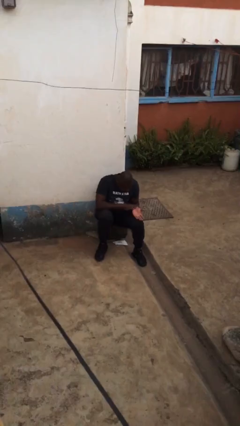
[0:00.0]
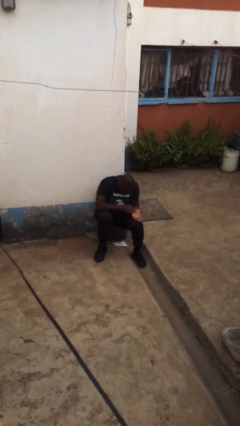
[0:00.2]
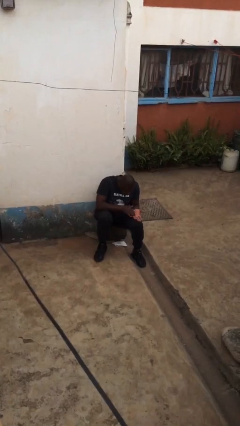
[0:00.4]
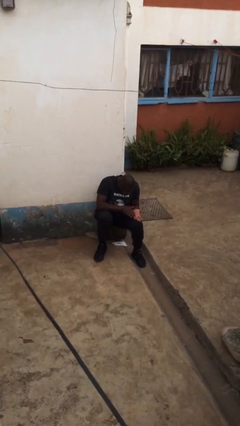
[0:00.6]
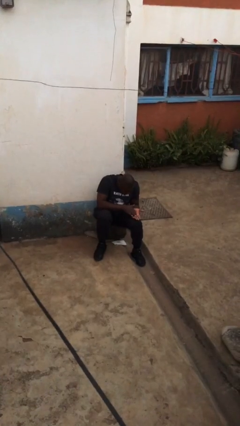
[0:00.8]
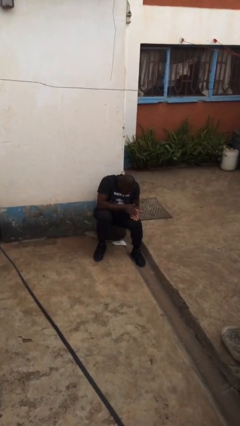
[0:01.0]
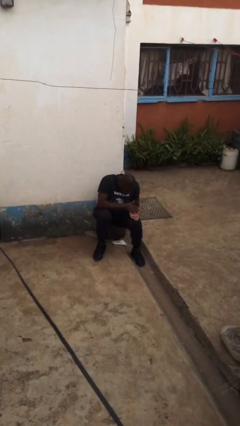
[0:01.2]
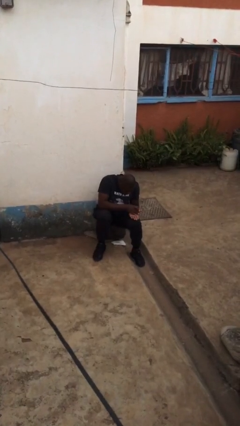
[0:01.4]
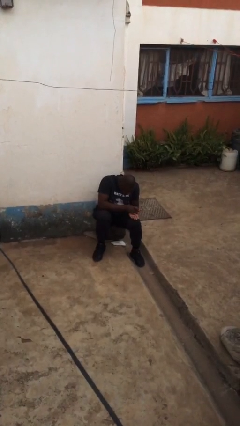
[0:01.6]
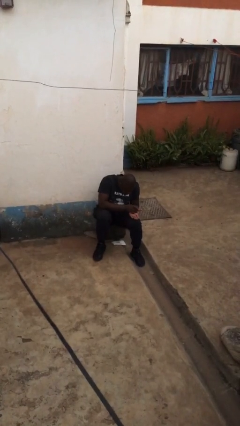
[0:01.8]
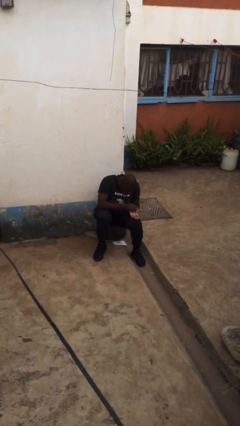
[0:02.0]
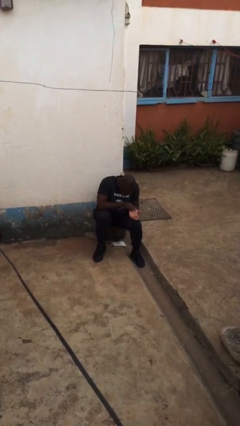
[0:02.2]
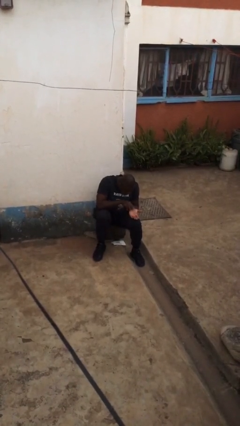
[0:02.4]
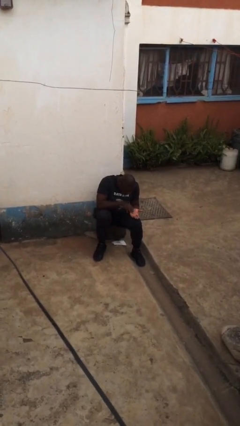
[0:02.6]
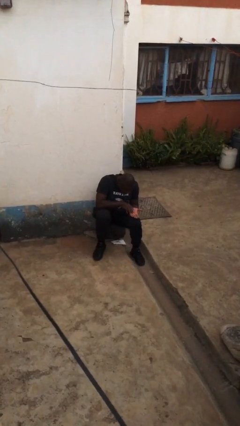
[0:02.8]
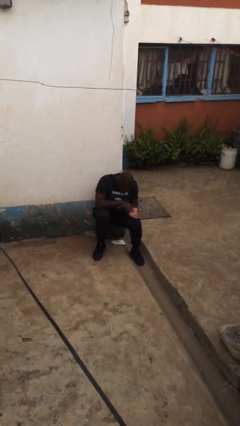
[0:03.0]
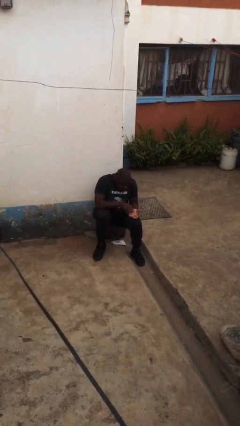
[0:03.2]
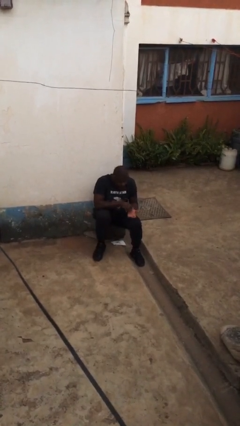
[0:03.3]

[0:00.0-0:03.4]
person looks at hands in lap

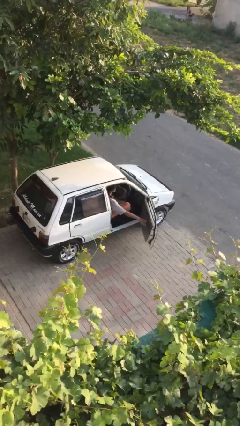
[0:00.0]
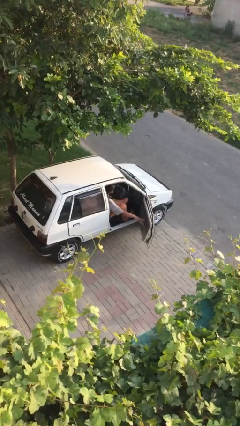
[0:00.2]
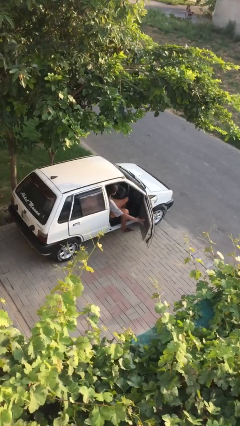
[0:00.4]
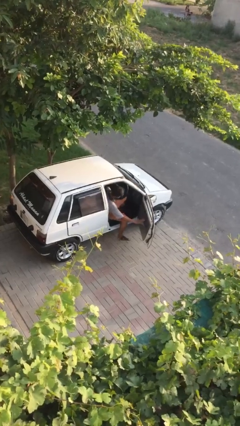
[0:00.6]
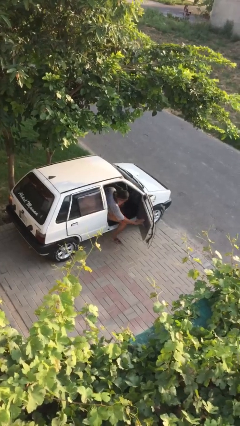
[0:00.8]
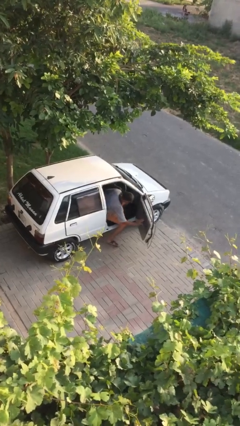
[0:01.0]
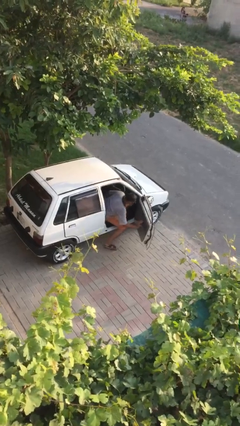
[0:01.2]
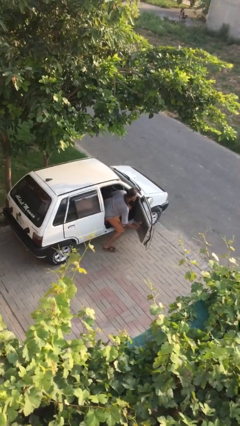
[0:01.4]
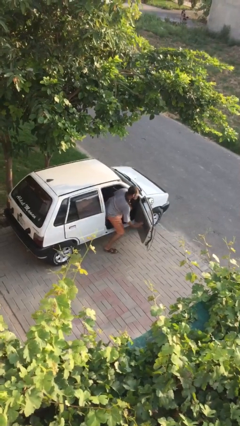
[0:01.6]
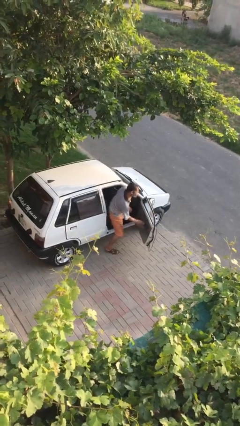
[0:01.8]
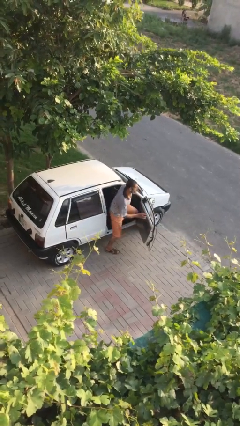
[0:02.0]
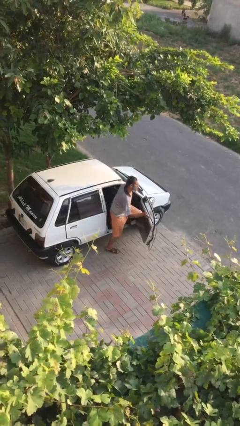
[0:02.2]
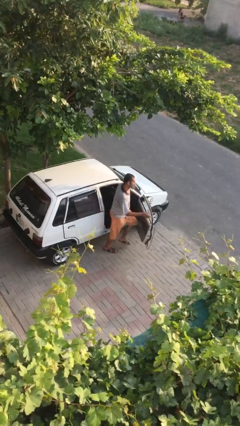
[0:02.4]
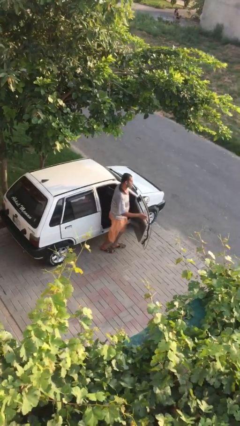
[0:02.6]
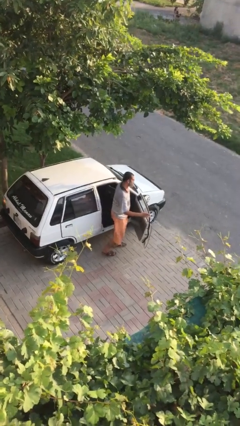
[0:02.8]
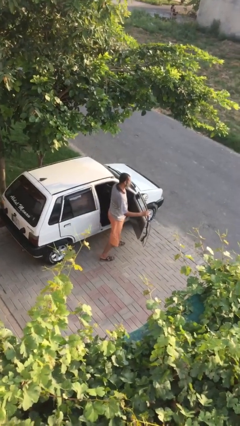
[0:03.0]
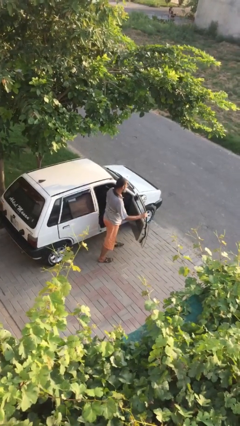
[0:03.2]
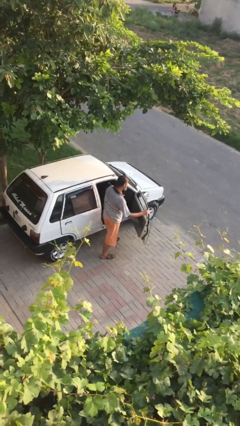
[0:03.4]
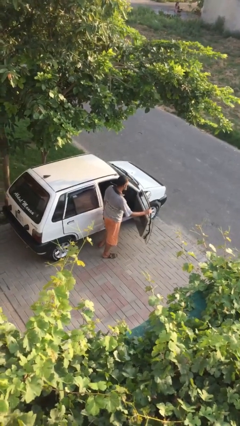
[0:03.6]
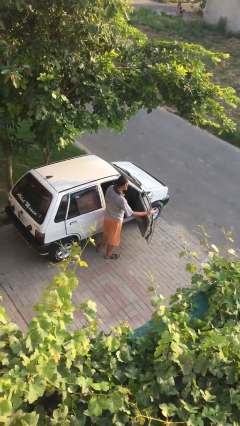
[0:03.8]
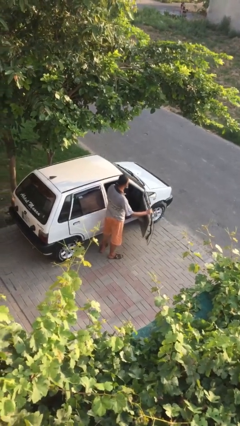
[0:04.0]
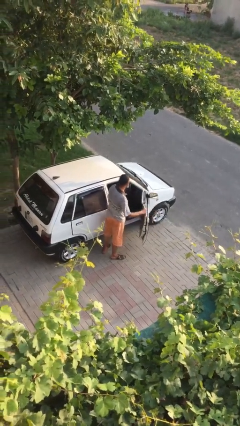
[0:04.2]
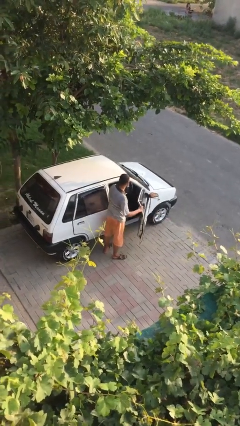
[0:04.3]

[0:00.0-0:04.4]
person exits car

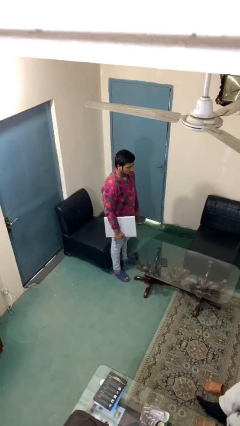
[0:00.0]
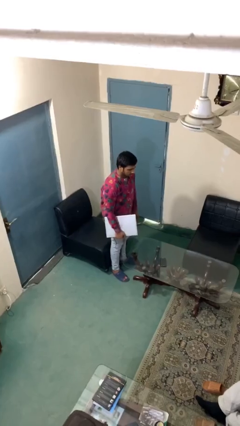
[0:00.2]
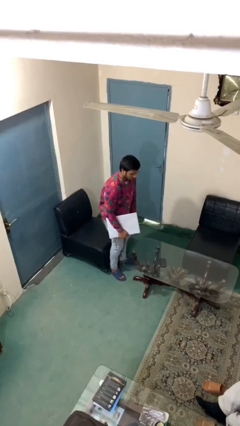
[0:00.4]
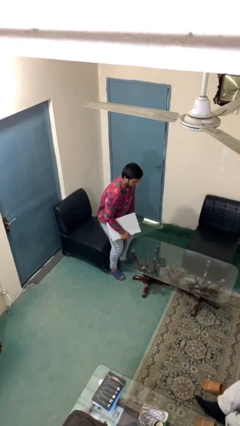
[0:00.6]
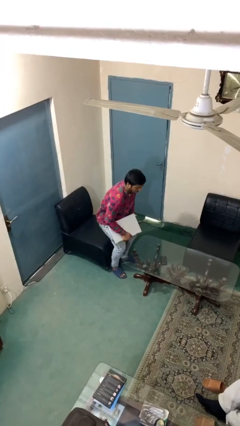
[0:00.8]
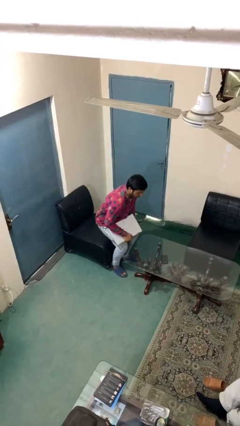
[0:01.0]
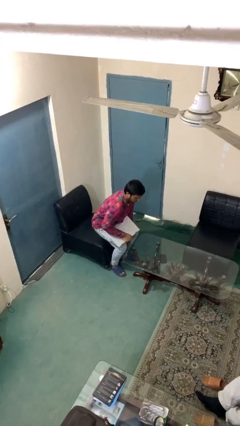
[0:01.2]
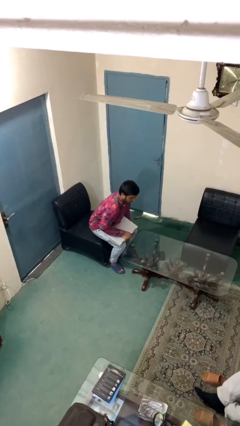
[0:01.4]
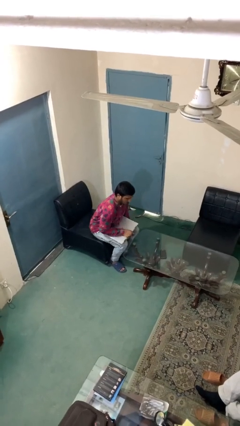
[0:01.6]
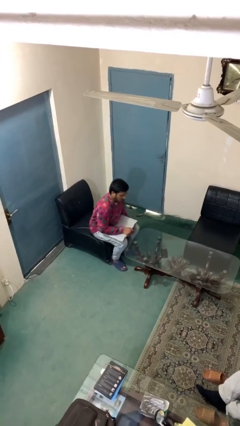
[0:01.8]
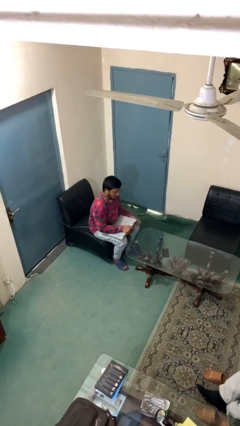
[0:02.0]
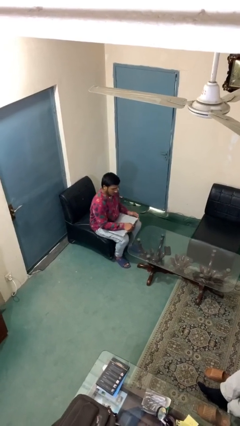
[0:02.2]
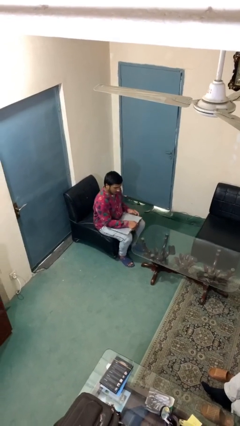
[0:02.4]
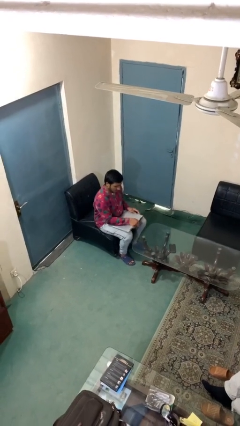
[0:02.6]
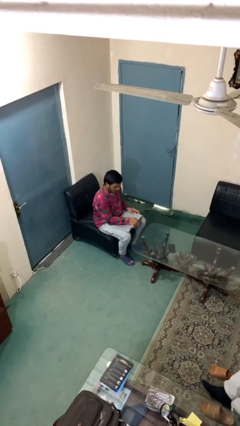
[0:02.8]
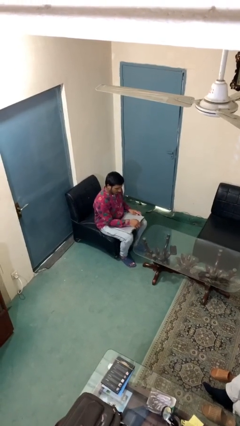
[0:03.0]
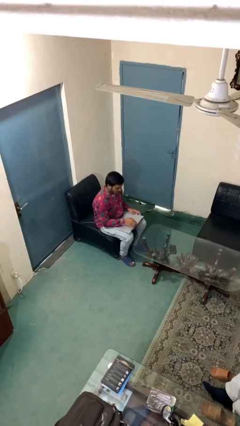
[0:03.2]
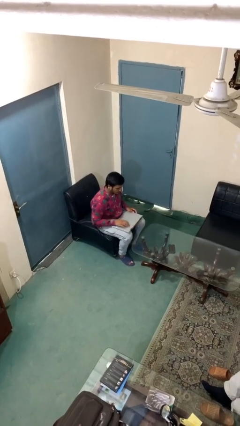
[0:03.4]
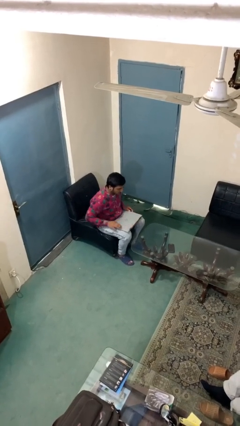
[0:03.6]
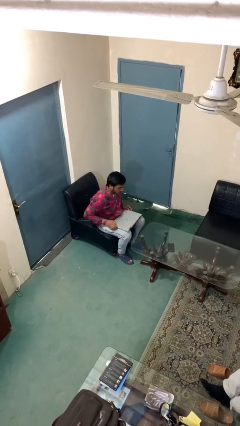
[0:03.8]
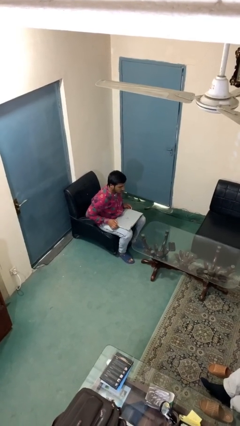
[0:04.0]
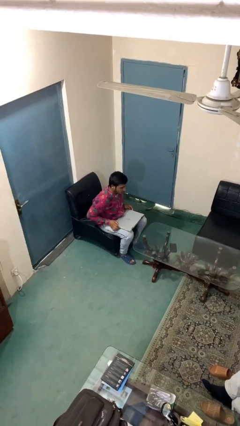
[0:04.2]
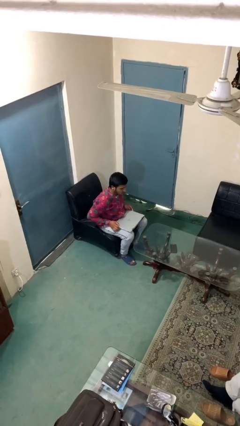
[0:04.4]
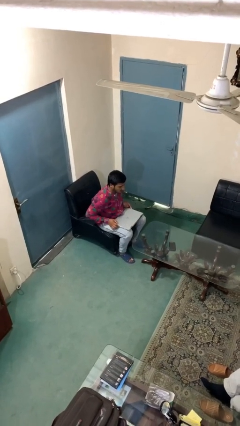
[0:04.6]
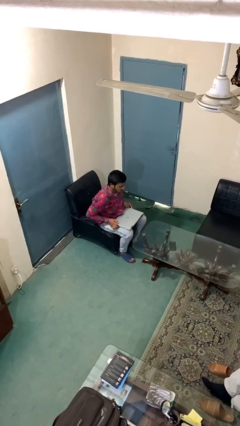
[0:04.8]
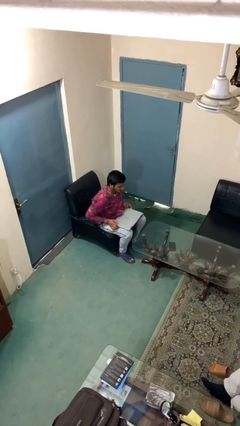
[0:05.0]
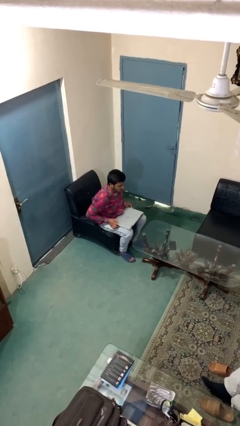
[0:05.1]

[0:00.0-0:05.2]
person sits down

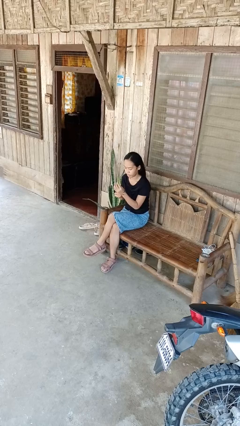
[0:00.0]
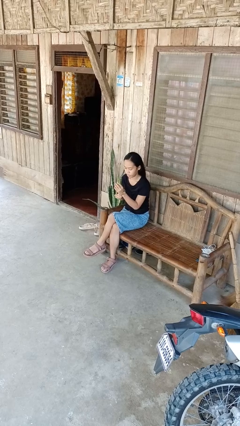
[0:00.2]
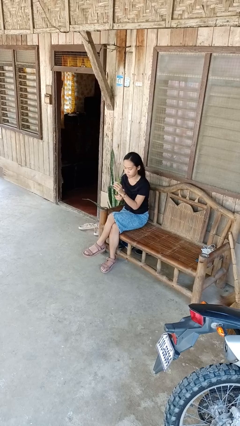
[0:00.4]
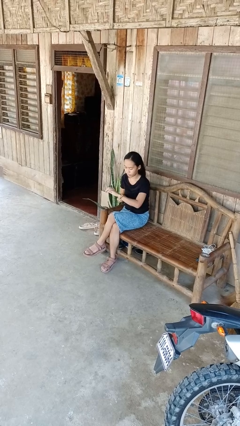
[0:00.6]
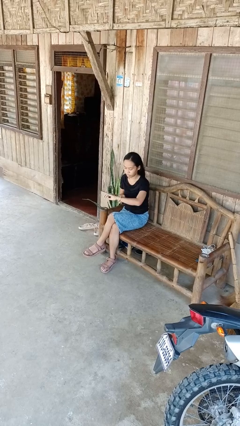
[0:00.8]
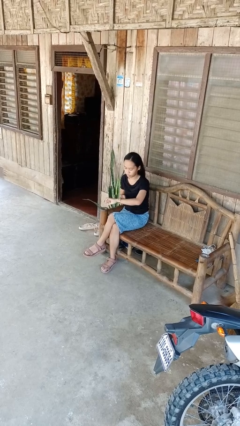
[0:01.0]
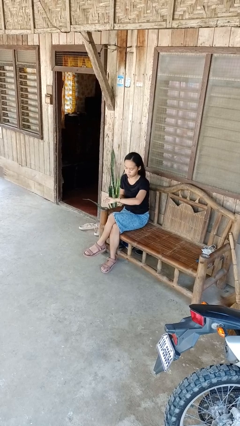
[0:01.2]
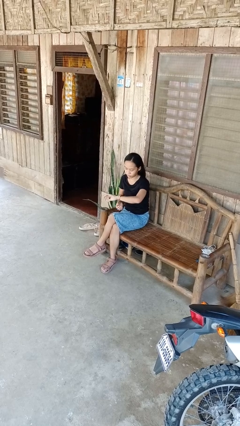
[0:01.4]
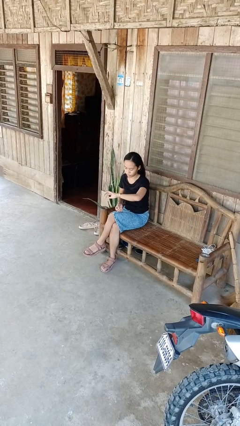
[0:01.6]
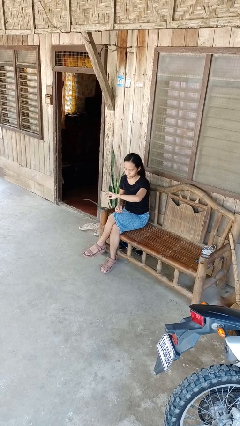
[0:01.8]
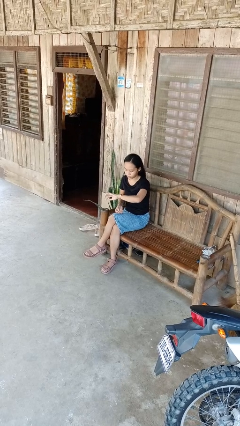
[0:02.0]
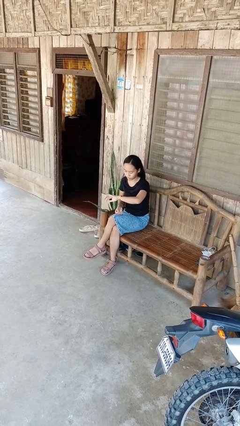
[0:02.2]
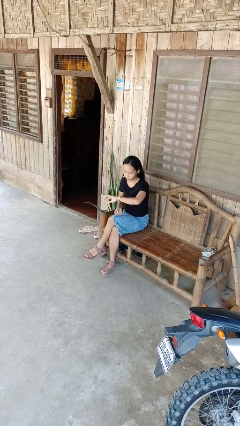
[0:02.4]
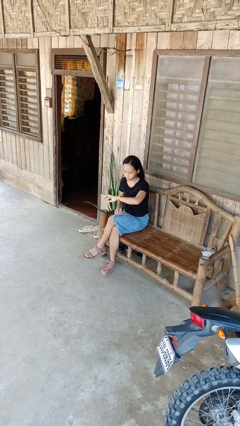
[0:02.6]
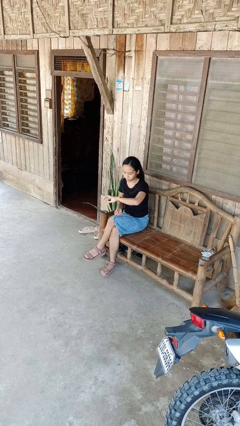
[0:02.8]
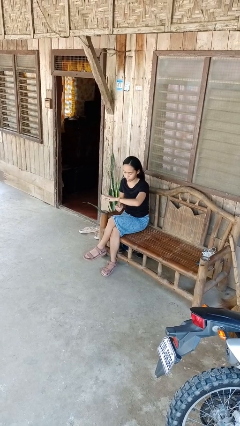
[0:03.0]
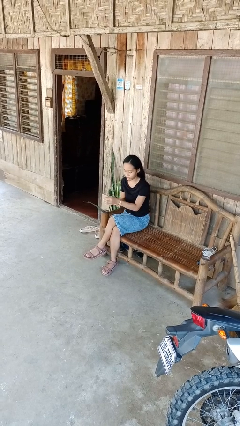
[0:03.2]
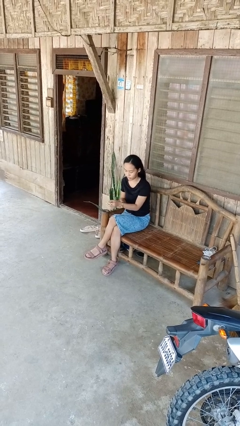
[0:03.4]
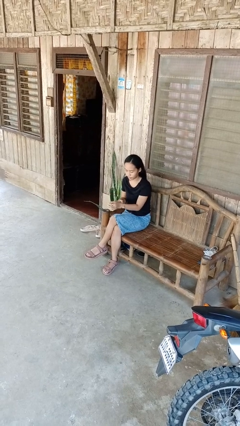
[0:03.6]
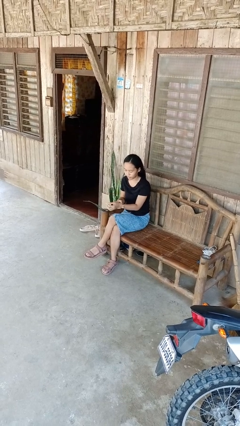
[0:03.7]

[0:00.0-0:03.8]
person puts on wristwatch

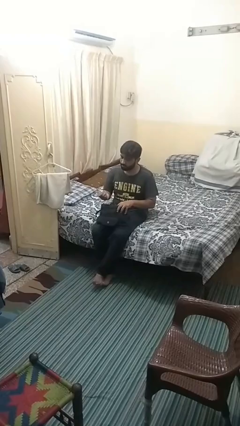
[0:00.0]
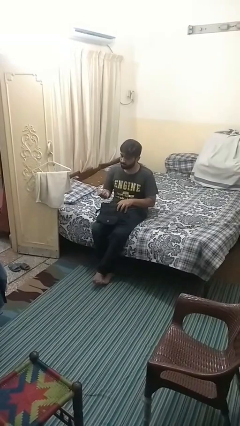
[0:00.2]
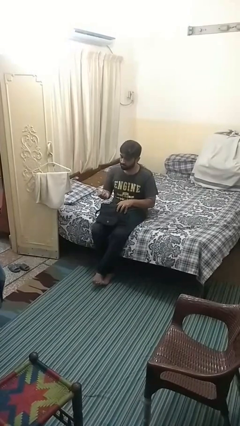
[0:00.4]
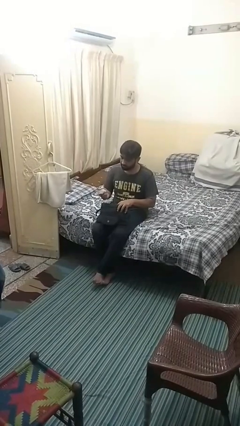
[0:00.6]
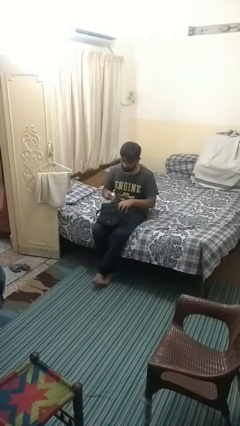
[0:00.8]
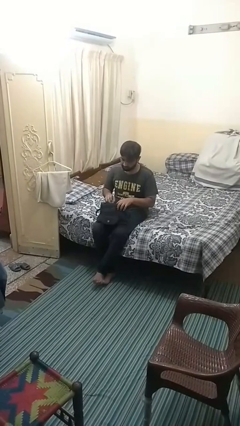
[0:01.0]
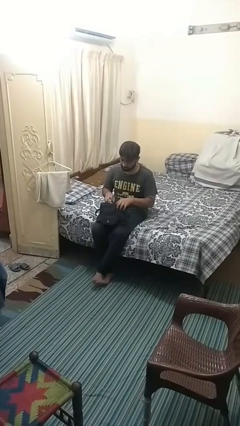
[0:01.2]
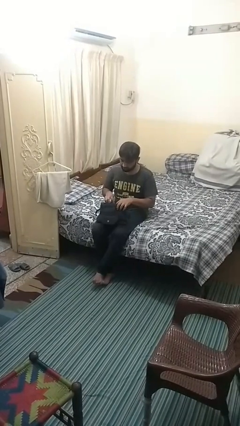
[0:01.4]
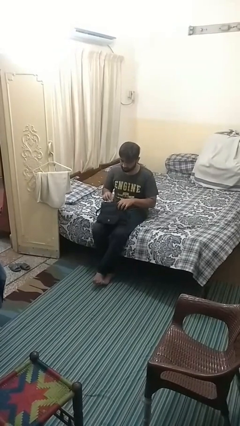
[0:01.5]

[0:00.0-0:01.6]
person puts object into purse
